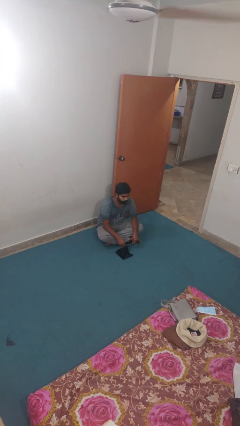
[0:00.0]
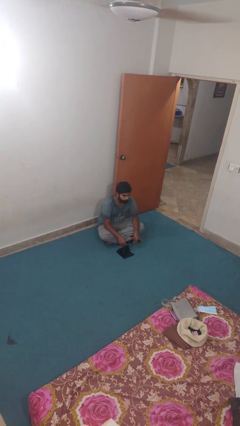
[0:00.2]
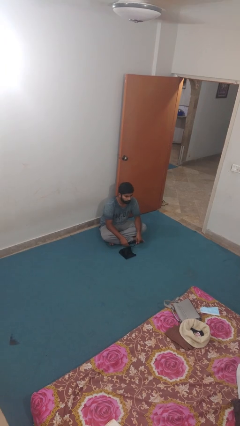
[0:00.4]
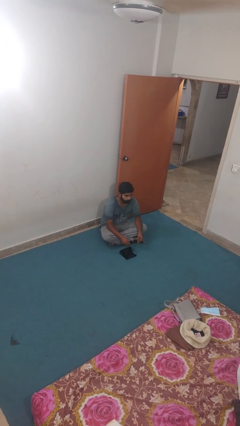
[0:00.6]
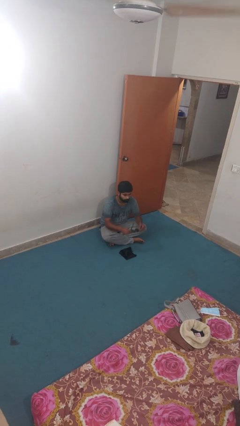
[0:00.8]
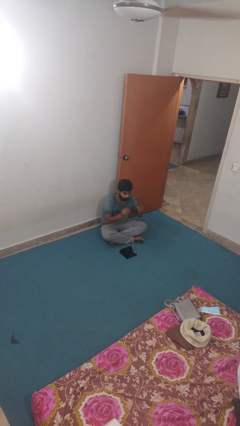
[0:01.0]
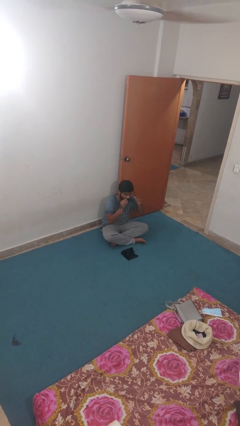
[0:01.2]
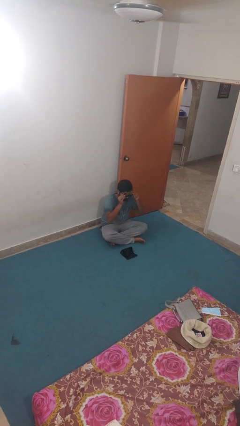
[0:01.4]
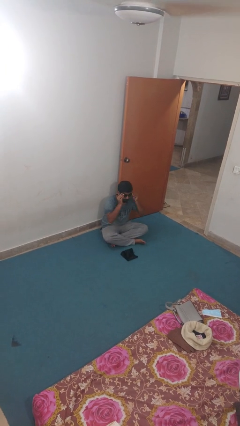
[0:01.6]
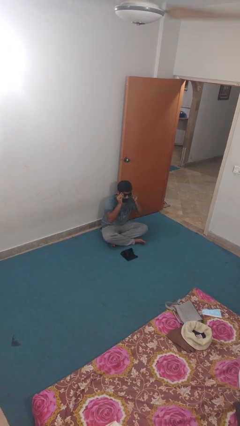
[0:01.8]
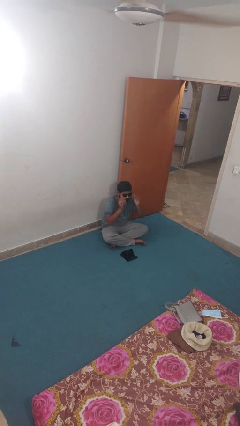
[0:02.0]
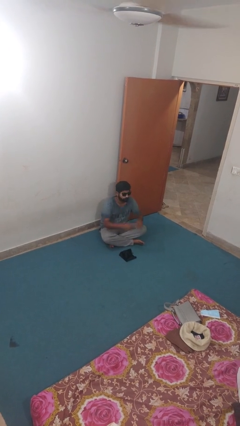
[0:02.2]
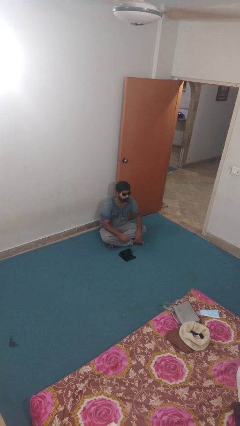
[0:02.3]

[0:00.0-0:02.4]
person puts on sunglasses

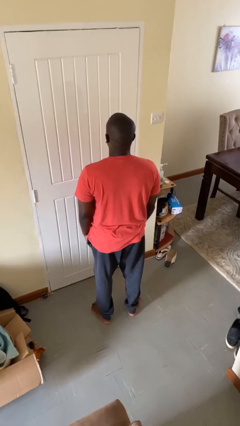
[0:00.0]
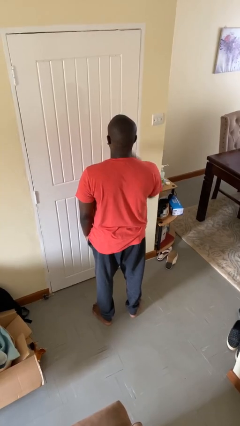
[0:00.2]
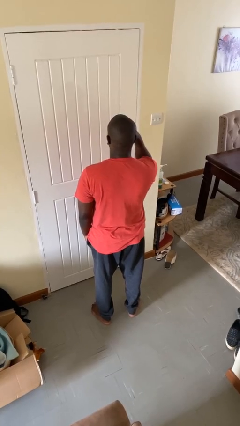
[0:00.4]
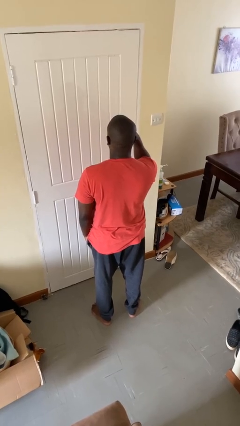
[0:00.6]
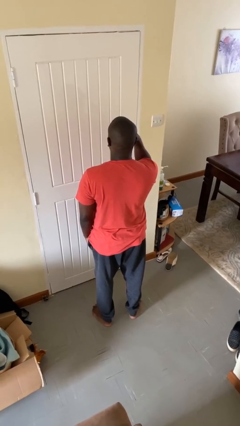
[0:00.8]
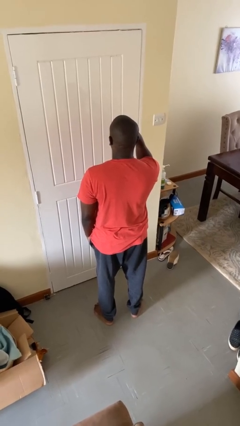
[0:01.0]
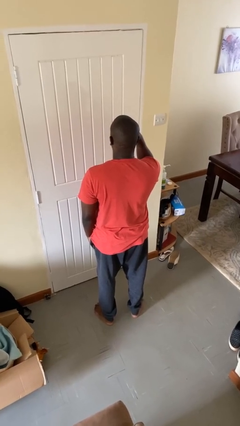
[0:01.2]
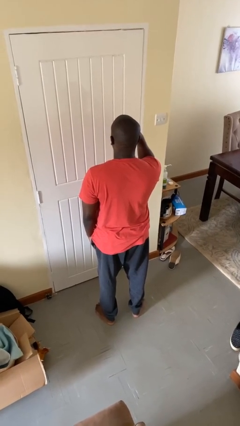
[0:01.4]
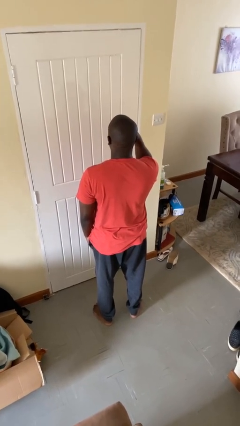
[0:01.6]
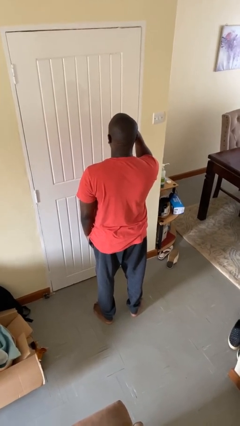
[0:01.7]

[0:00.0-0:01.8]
person salutes

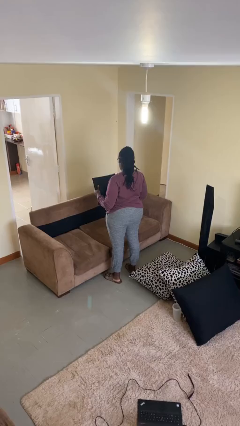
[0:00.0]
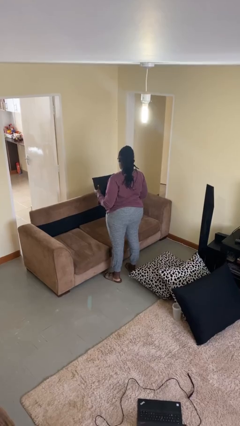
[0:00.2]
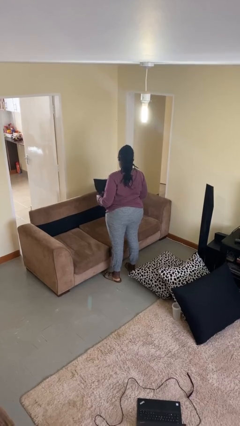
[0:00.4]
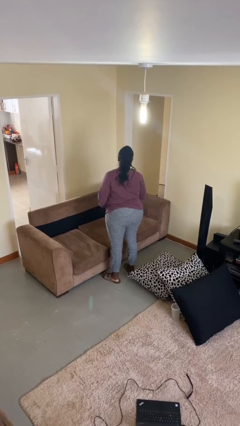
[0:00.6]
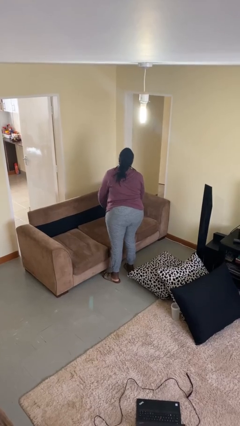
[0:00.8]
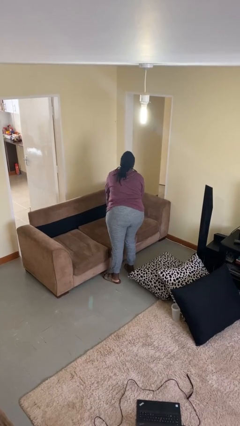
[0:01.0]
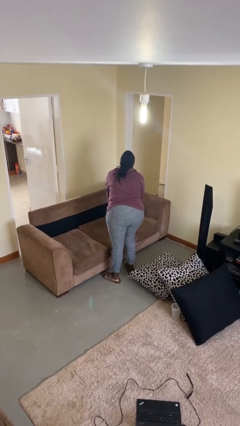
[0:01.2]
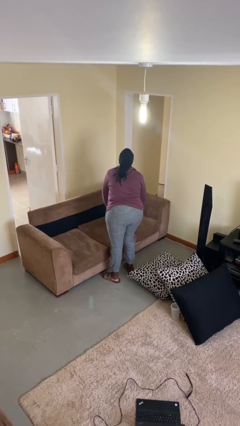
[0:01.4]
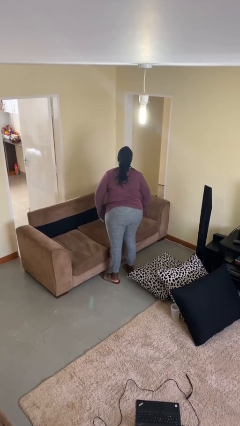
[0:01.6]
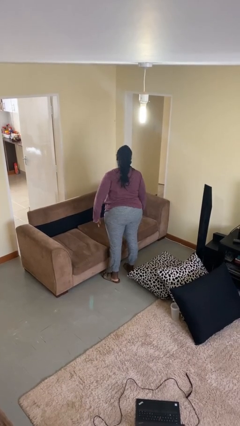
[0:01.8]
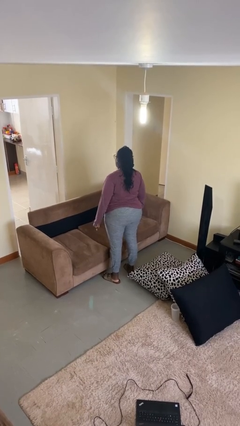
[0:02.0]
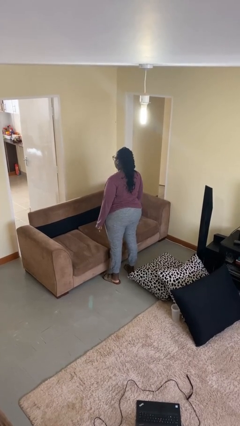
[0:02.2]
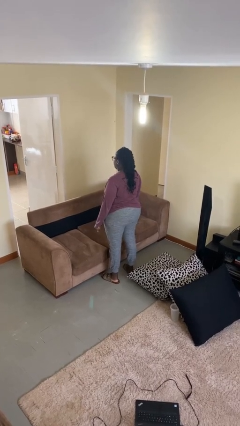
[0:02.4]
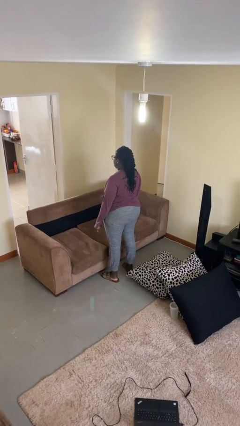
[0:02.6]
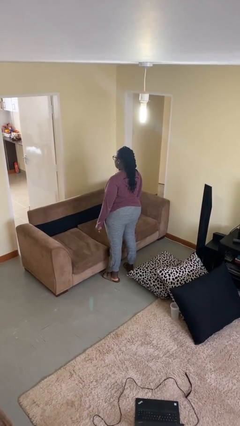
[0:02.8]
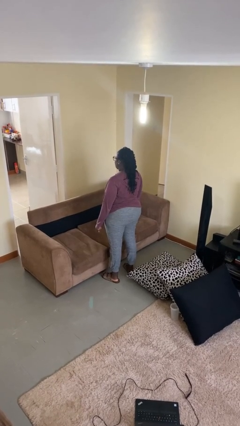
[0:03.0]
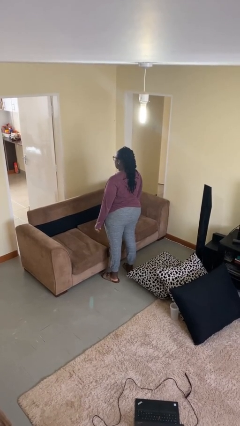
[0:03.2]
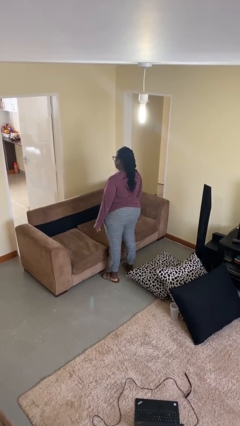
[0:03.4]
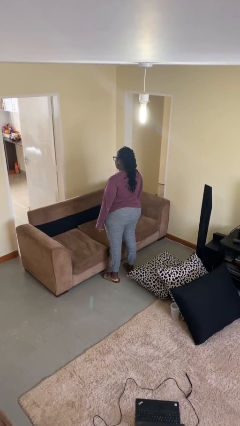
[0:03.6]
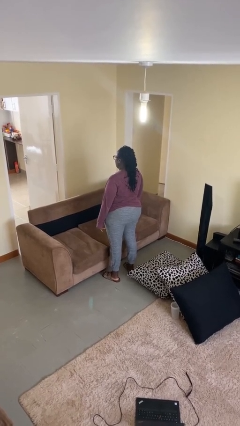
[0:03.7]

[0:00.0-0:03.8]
person puts down object on couch

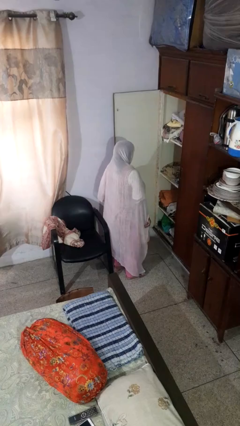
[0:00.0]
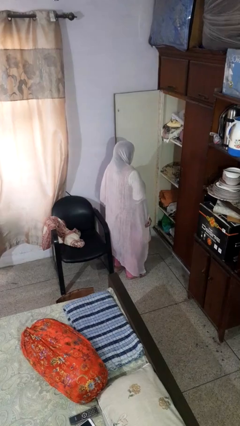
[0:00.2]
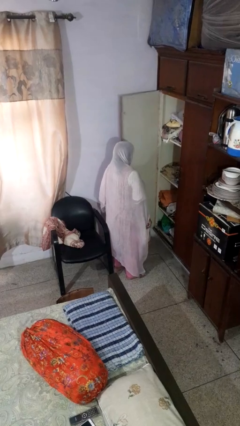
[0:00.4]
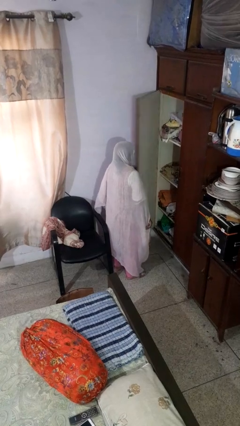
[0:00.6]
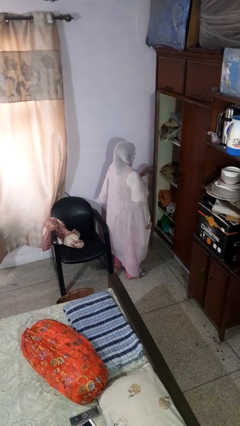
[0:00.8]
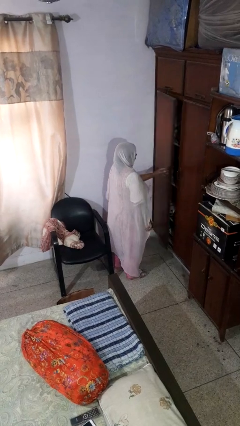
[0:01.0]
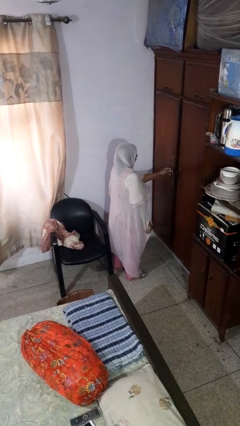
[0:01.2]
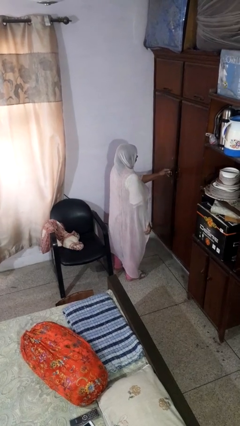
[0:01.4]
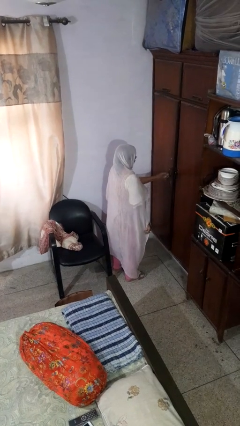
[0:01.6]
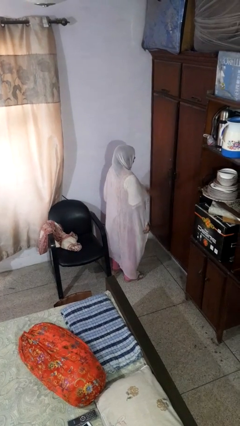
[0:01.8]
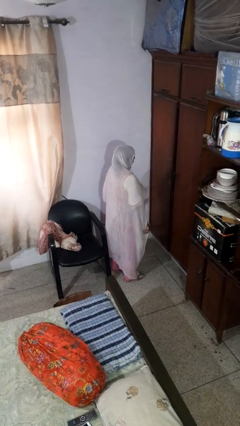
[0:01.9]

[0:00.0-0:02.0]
person closes closet door

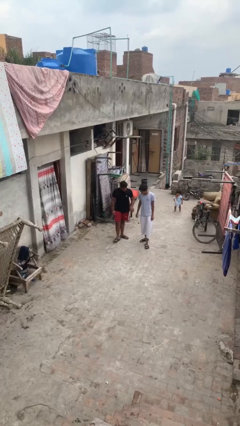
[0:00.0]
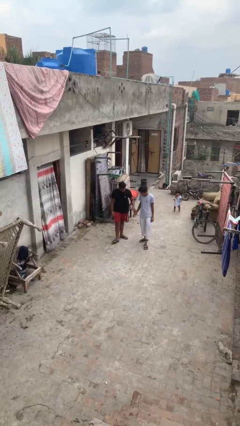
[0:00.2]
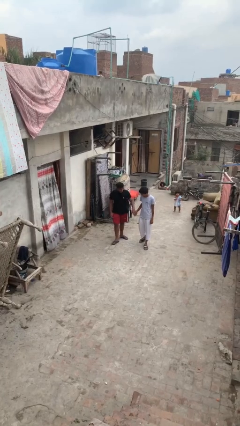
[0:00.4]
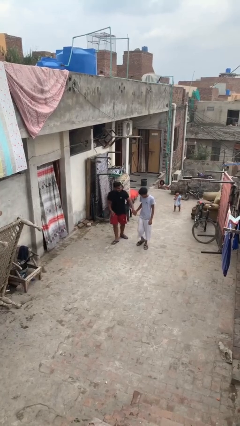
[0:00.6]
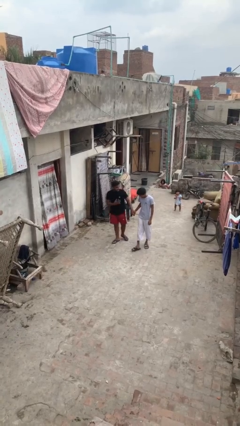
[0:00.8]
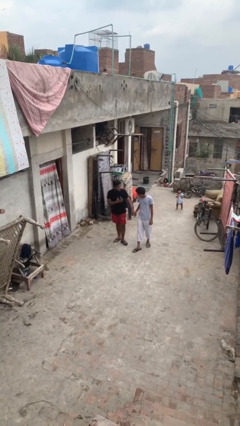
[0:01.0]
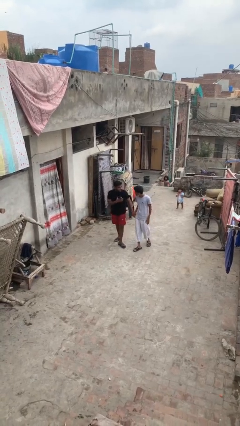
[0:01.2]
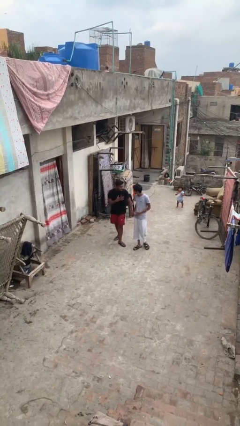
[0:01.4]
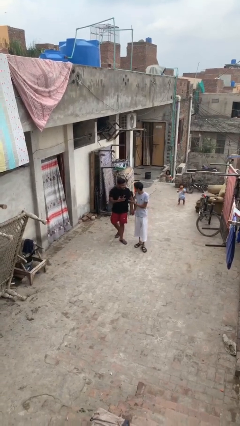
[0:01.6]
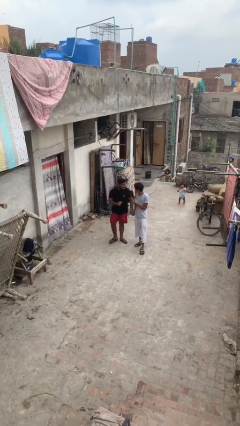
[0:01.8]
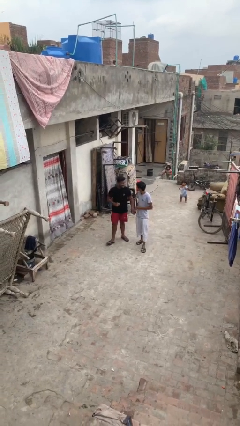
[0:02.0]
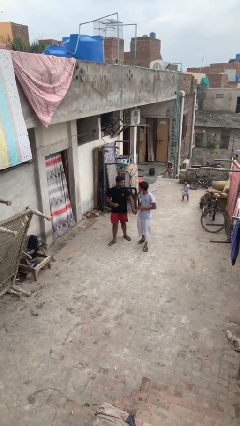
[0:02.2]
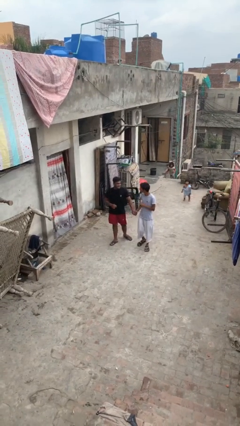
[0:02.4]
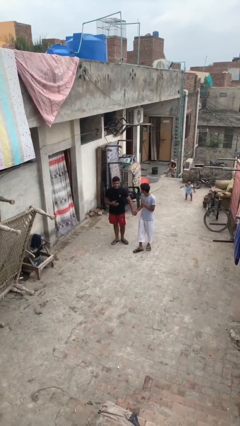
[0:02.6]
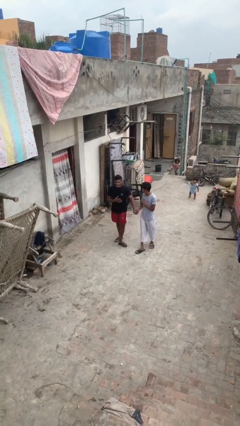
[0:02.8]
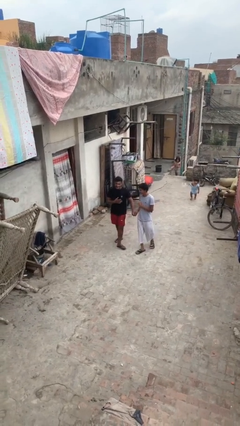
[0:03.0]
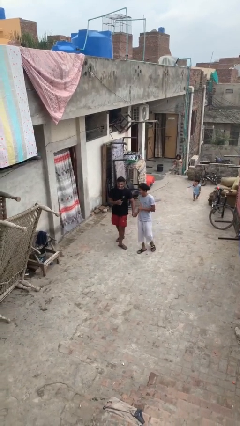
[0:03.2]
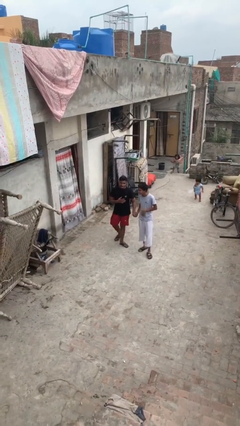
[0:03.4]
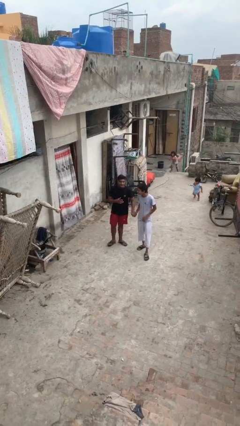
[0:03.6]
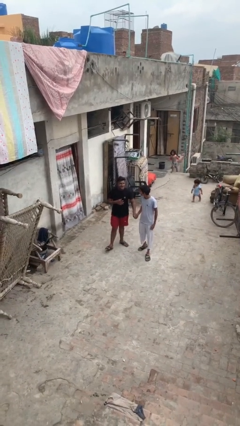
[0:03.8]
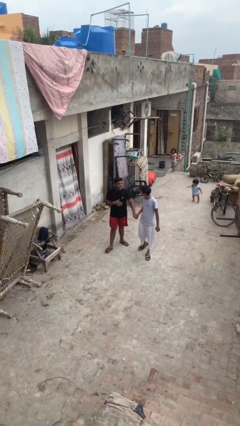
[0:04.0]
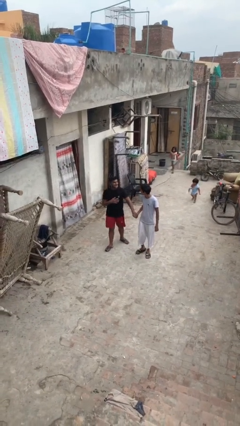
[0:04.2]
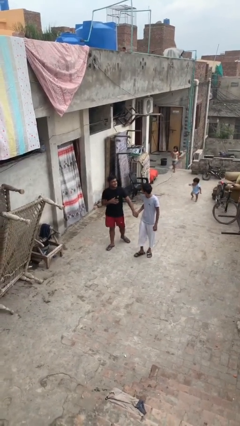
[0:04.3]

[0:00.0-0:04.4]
person holds hand

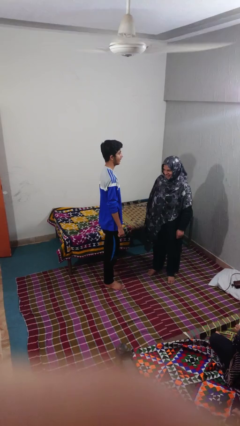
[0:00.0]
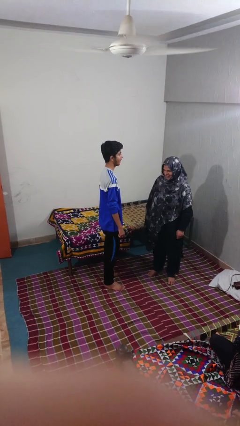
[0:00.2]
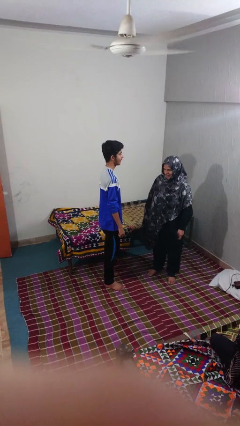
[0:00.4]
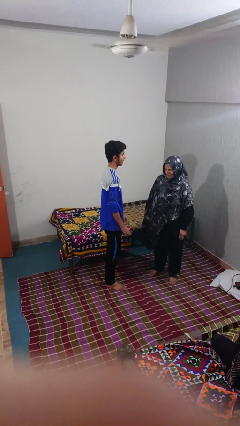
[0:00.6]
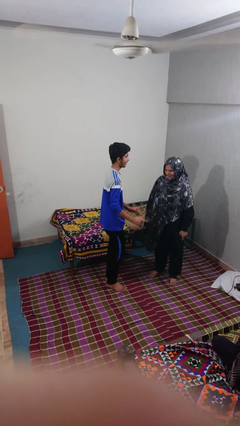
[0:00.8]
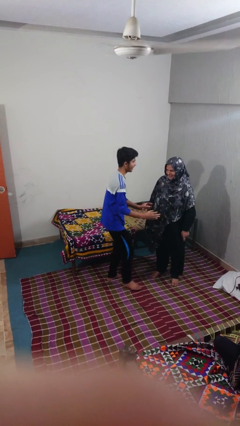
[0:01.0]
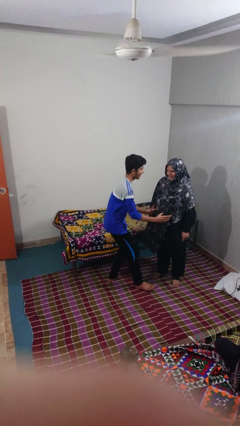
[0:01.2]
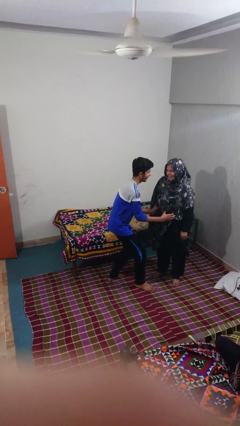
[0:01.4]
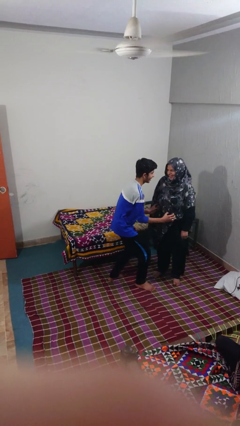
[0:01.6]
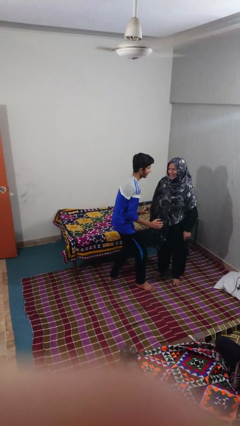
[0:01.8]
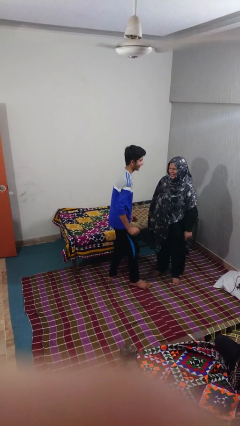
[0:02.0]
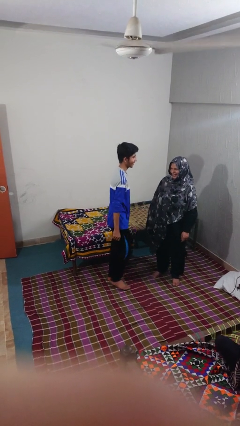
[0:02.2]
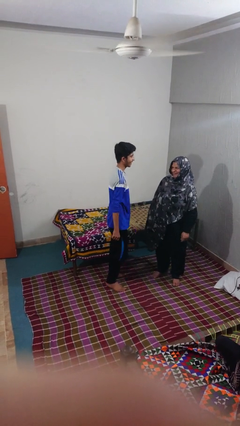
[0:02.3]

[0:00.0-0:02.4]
person tickles person

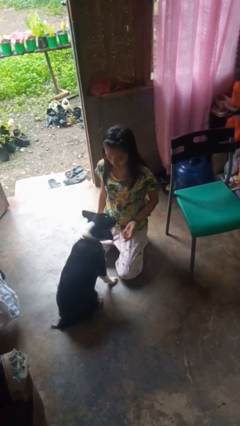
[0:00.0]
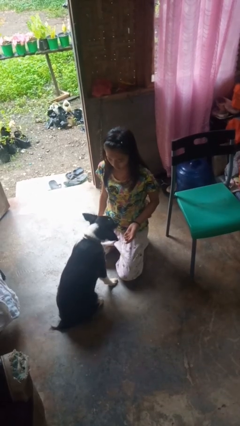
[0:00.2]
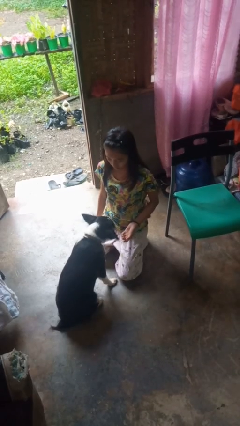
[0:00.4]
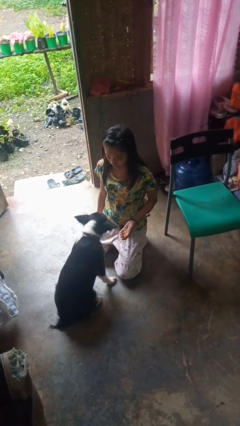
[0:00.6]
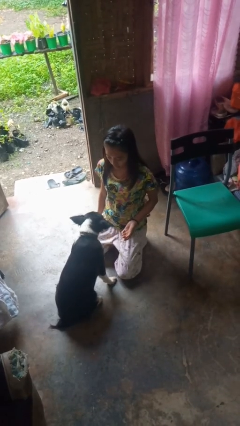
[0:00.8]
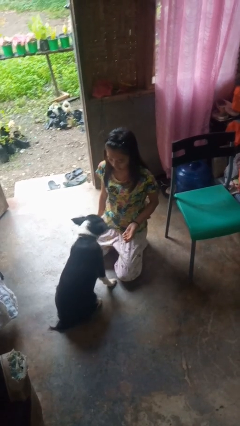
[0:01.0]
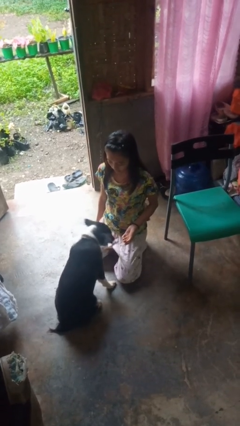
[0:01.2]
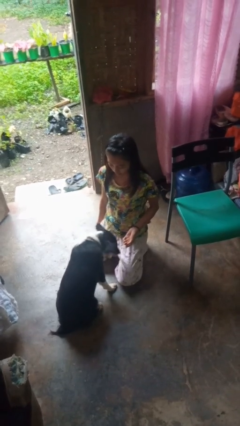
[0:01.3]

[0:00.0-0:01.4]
person pets dog
